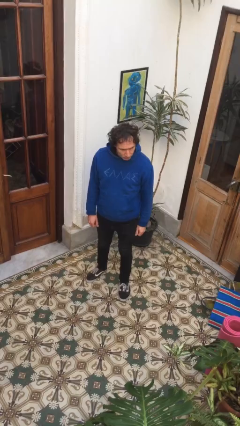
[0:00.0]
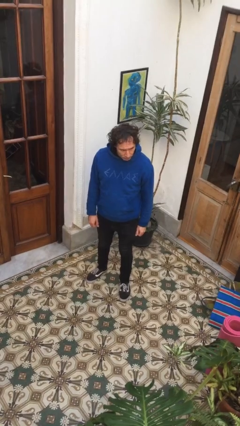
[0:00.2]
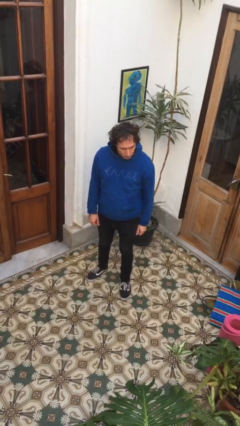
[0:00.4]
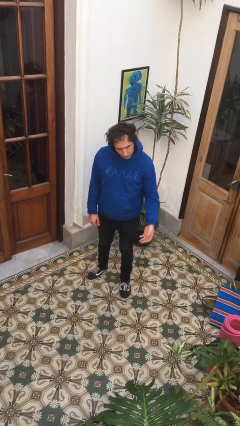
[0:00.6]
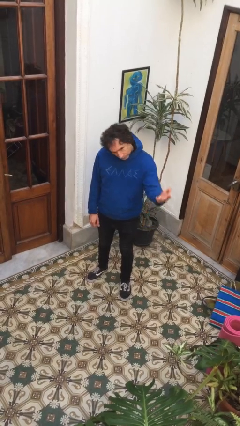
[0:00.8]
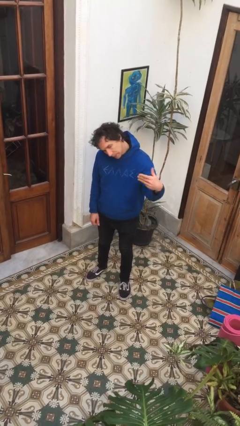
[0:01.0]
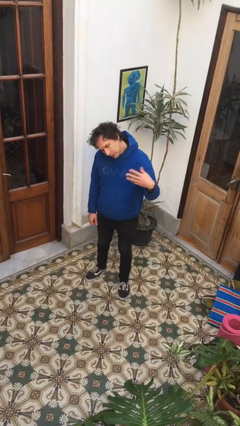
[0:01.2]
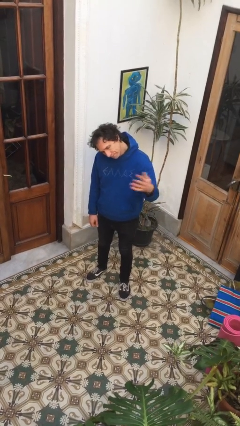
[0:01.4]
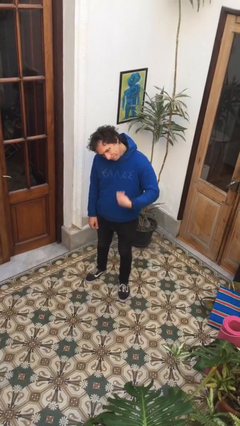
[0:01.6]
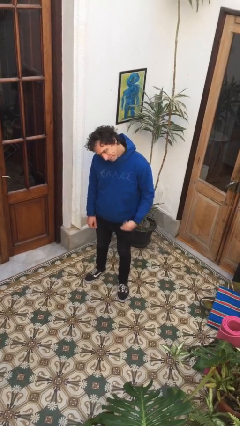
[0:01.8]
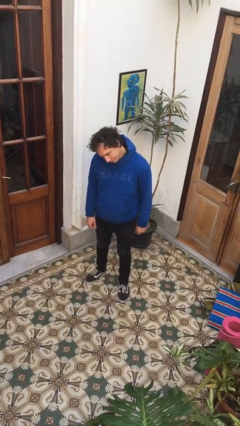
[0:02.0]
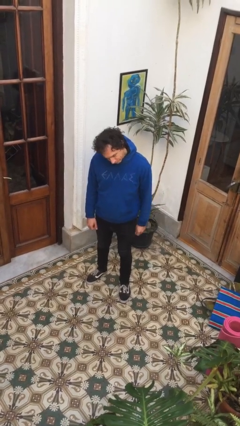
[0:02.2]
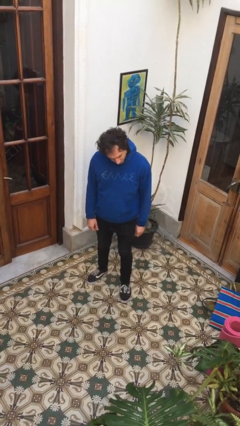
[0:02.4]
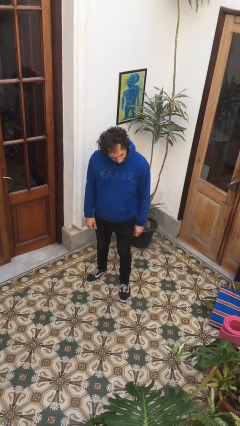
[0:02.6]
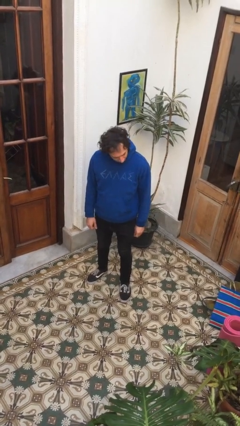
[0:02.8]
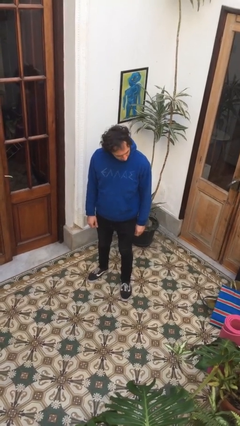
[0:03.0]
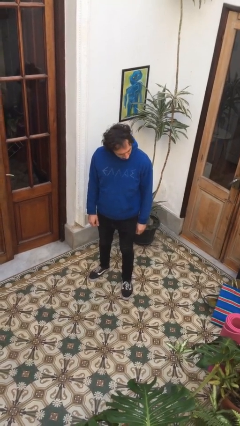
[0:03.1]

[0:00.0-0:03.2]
person gestures come here

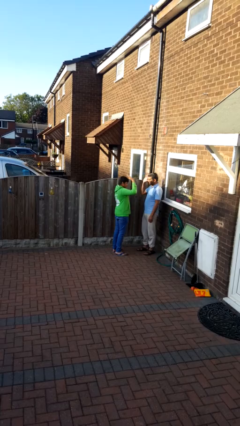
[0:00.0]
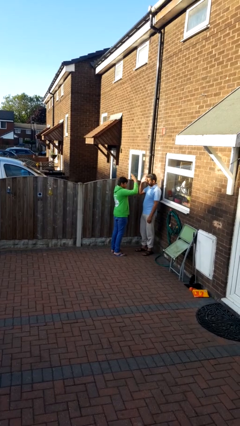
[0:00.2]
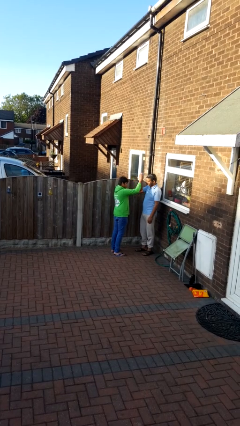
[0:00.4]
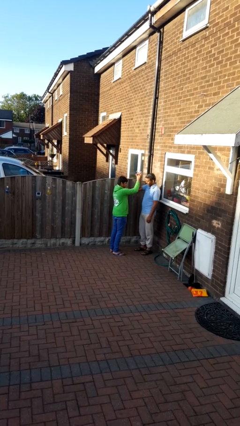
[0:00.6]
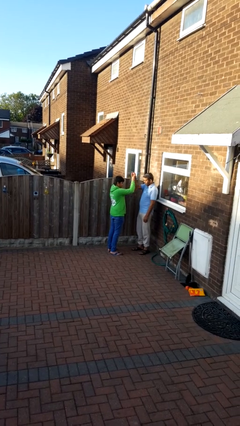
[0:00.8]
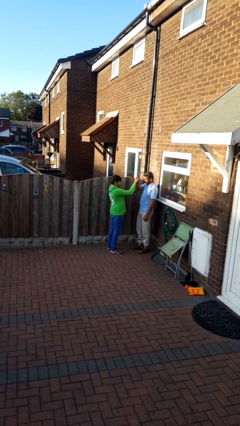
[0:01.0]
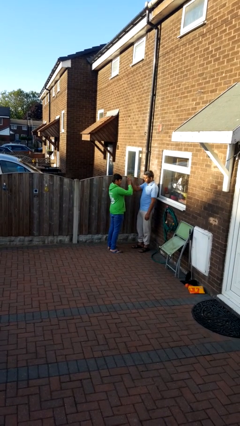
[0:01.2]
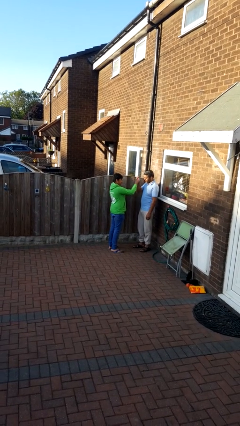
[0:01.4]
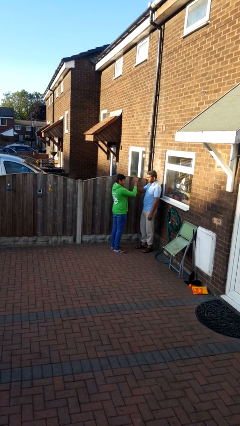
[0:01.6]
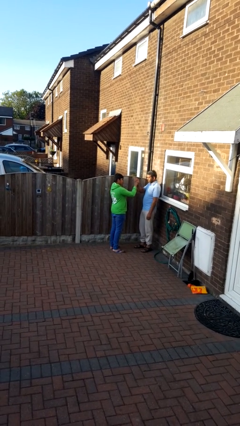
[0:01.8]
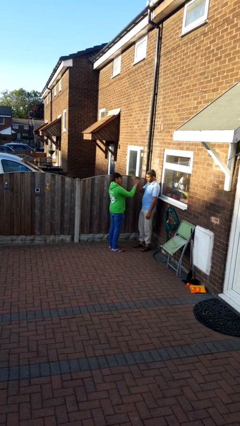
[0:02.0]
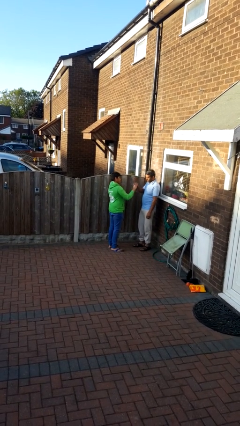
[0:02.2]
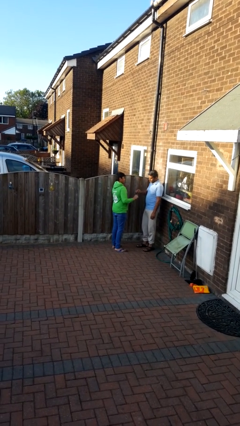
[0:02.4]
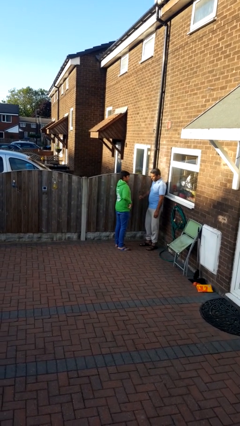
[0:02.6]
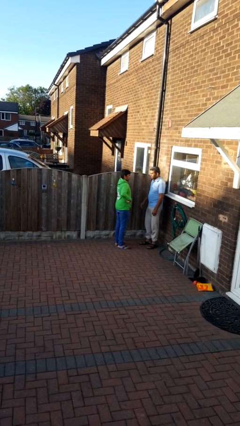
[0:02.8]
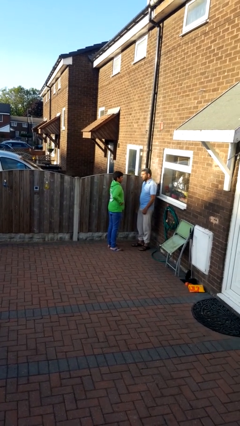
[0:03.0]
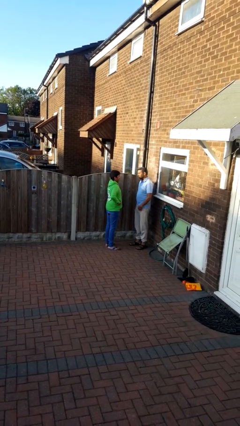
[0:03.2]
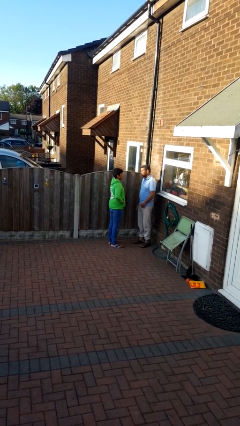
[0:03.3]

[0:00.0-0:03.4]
person highfives hand

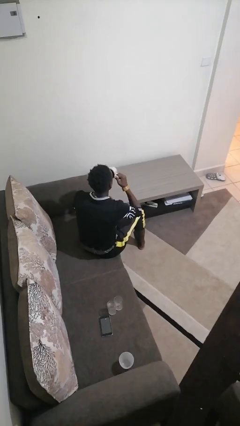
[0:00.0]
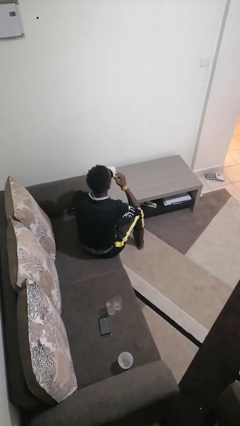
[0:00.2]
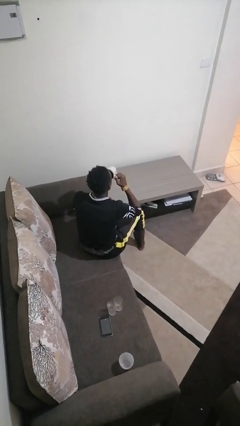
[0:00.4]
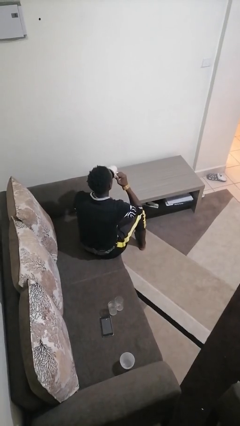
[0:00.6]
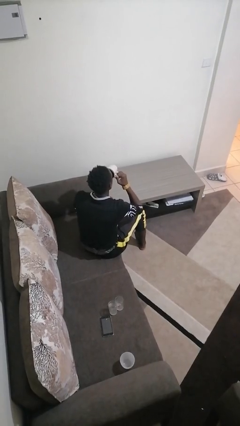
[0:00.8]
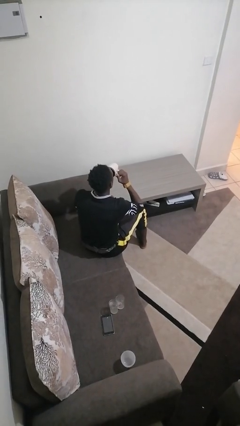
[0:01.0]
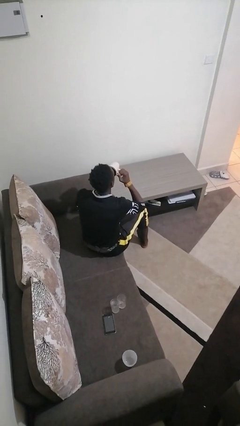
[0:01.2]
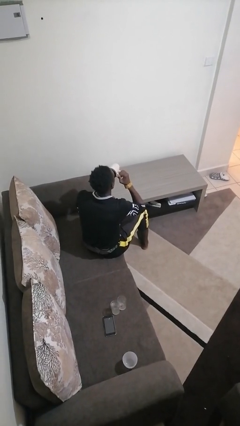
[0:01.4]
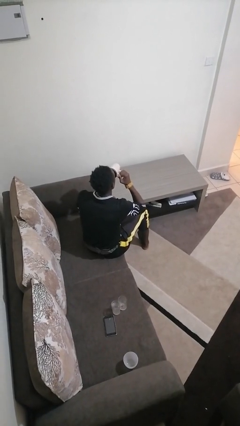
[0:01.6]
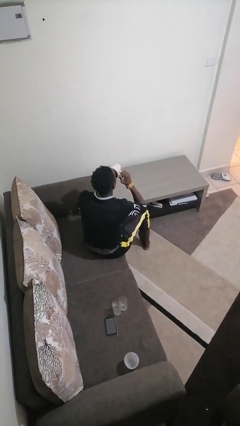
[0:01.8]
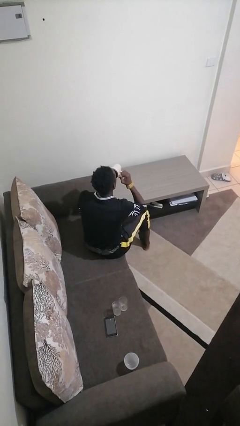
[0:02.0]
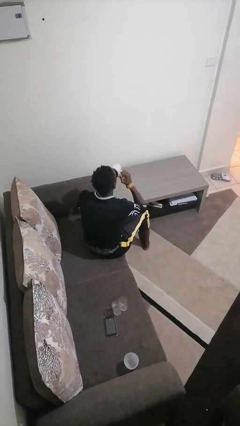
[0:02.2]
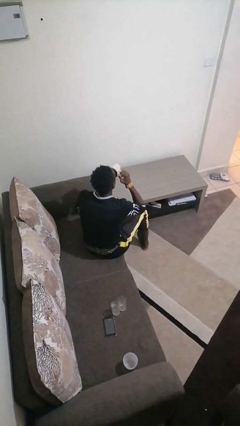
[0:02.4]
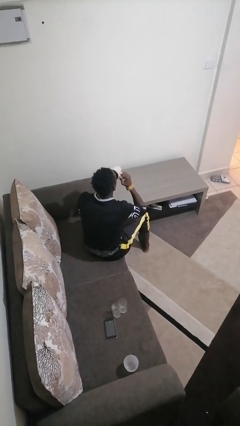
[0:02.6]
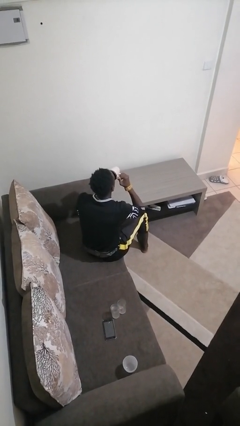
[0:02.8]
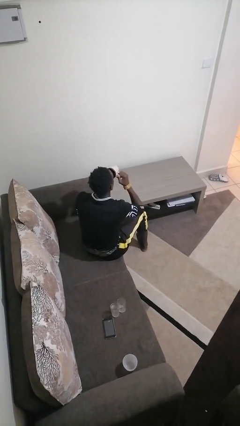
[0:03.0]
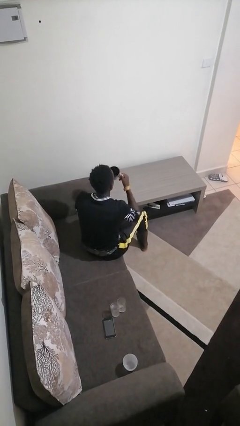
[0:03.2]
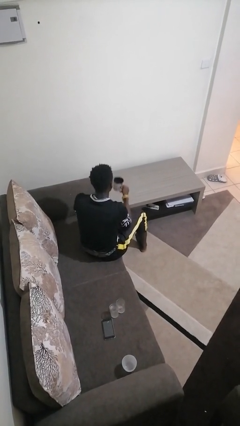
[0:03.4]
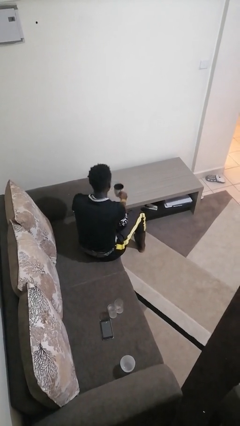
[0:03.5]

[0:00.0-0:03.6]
person drinks from mug

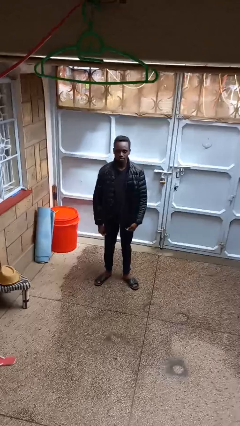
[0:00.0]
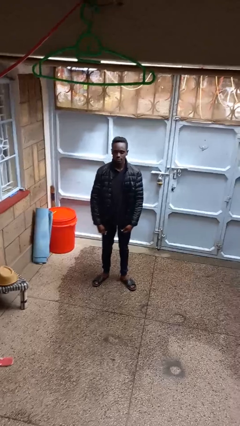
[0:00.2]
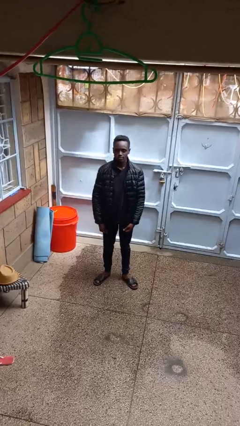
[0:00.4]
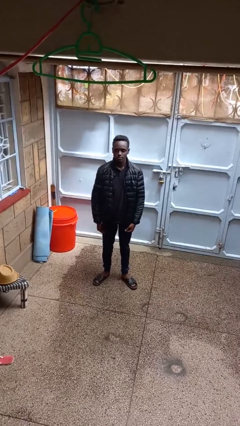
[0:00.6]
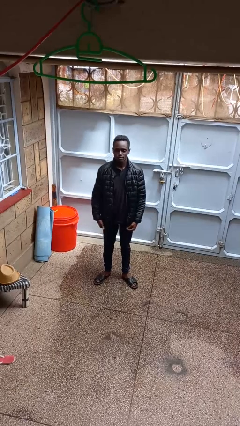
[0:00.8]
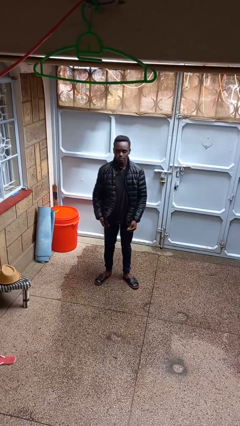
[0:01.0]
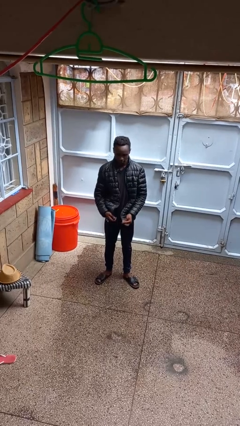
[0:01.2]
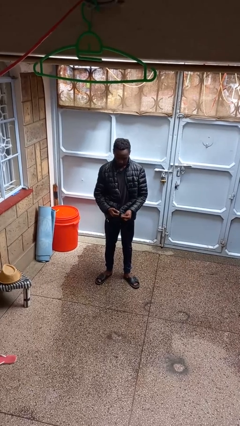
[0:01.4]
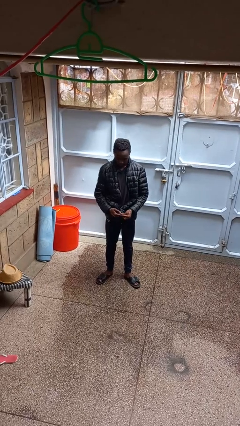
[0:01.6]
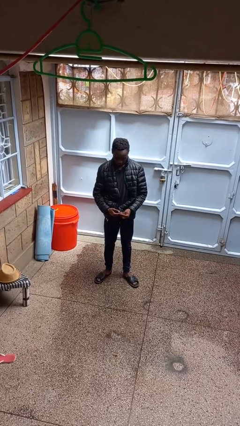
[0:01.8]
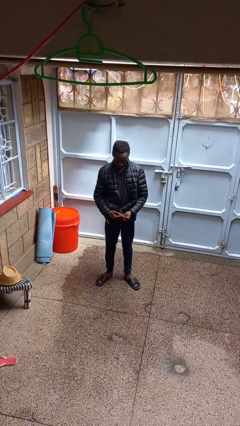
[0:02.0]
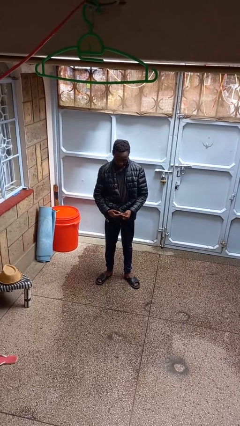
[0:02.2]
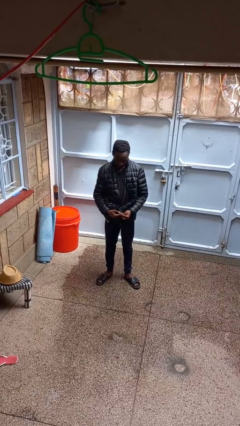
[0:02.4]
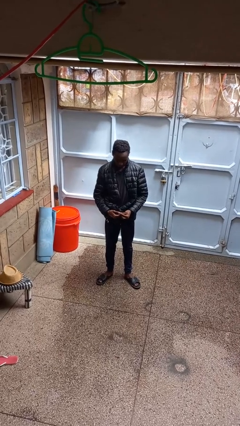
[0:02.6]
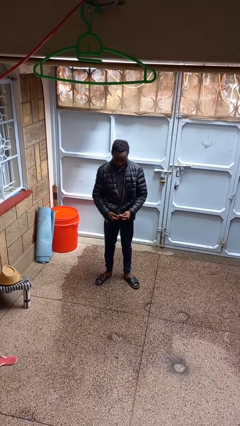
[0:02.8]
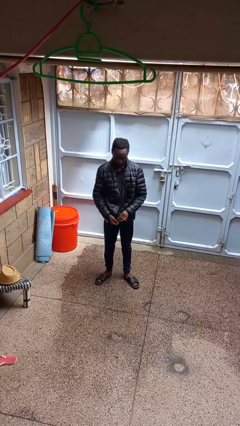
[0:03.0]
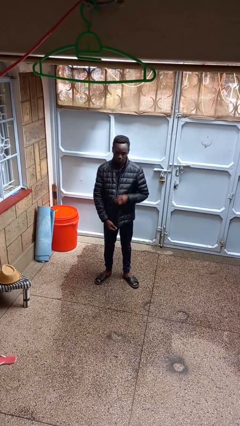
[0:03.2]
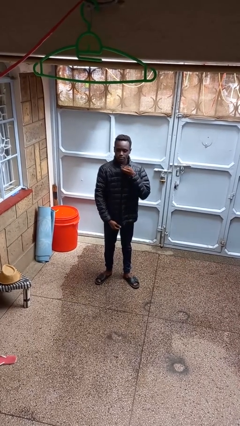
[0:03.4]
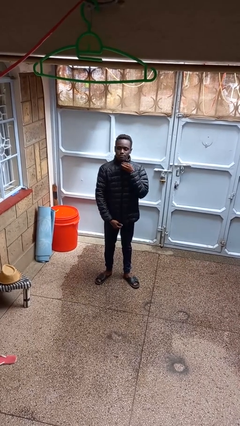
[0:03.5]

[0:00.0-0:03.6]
person zips up jacket

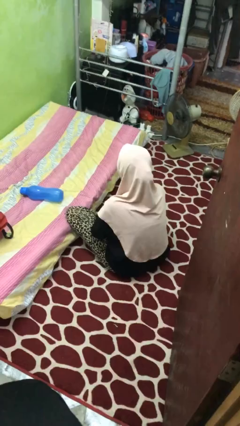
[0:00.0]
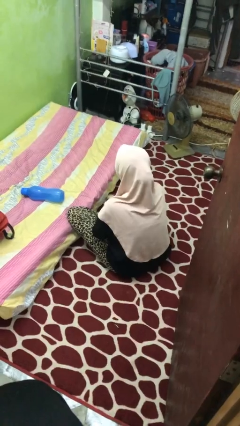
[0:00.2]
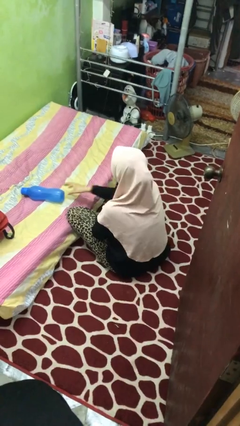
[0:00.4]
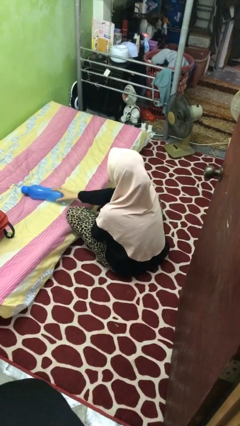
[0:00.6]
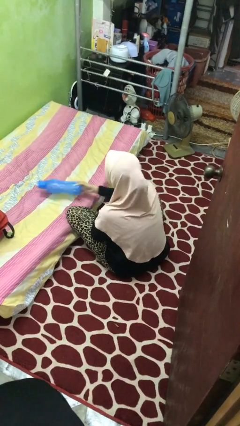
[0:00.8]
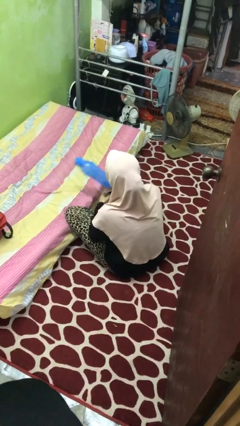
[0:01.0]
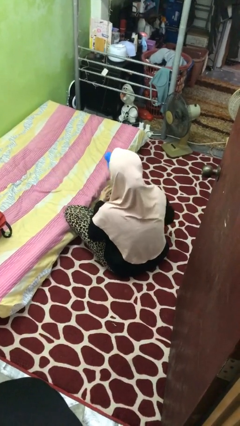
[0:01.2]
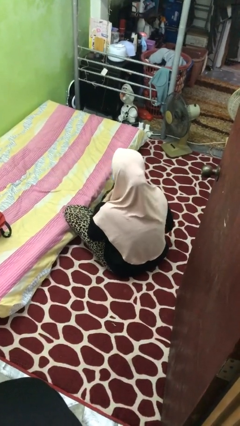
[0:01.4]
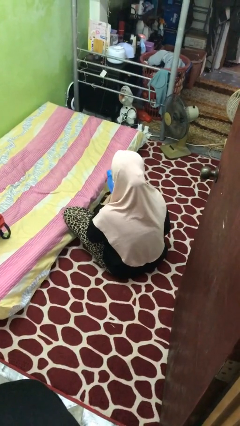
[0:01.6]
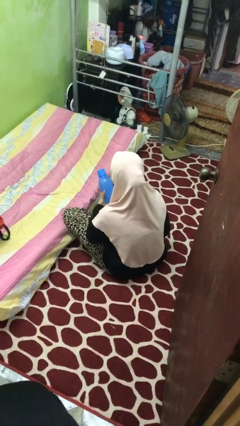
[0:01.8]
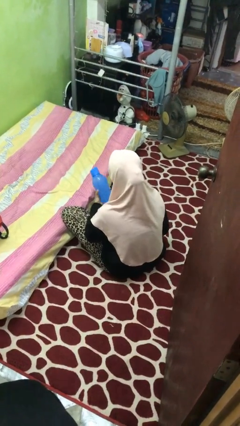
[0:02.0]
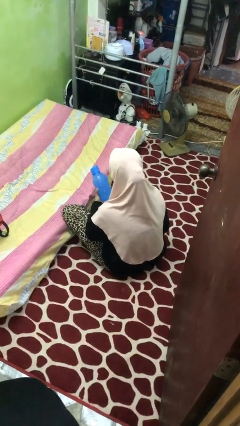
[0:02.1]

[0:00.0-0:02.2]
person picks up object from bed

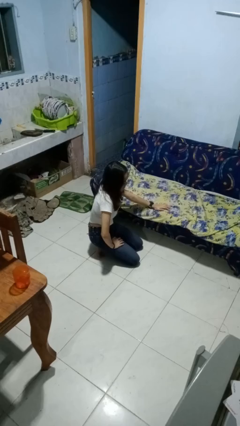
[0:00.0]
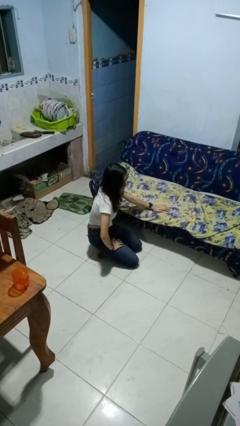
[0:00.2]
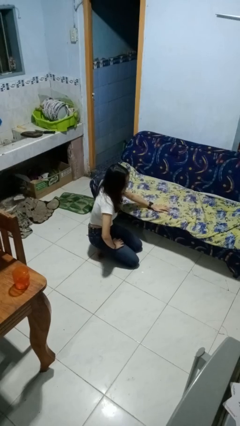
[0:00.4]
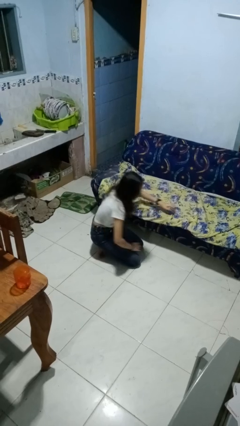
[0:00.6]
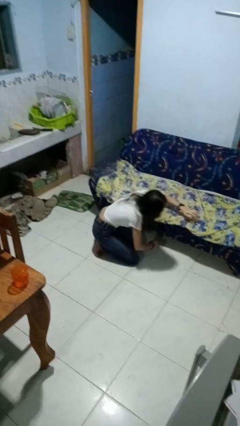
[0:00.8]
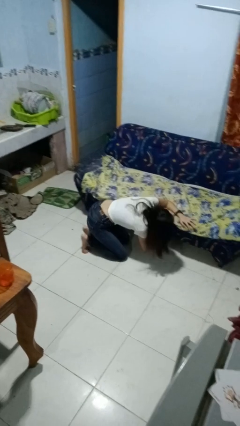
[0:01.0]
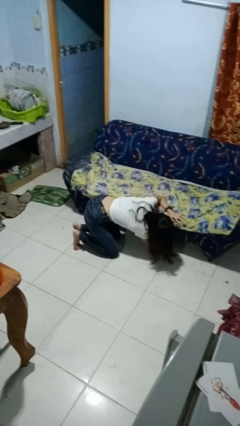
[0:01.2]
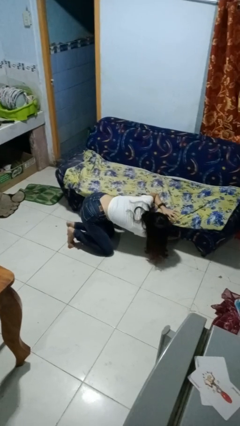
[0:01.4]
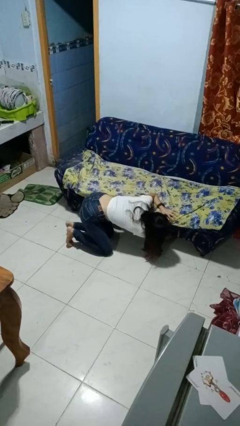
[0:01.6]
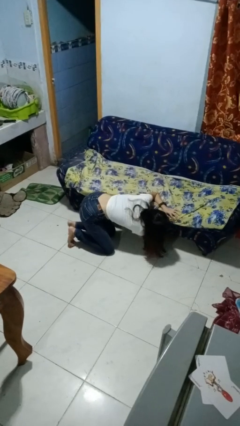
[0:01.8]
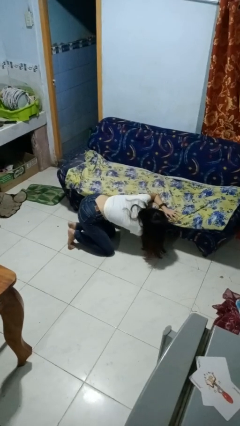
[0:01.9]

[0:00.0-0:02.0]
person searches under couch
